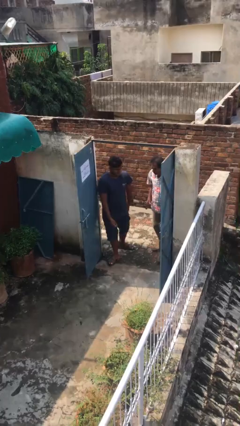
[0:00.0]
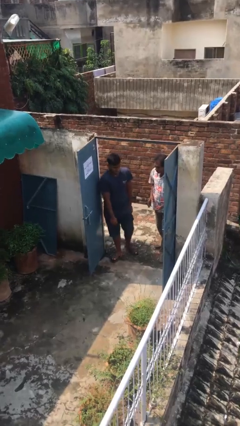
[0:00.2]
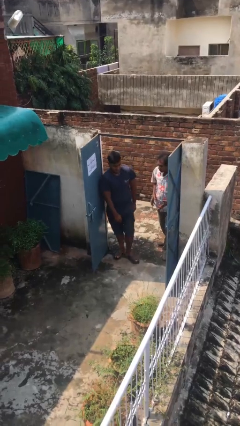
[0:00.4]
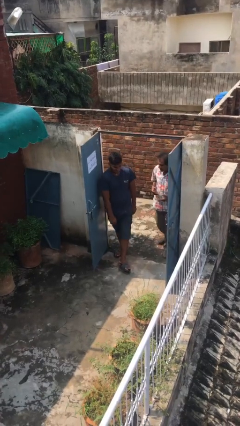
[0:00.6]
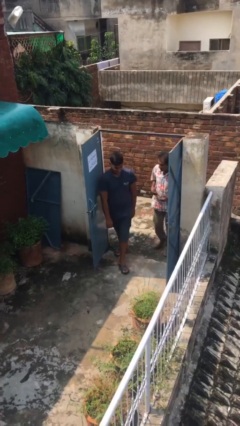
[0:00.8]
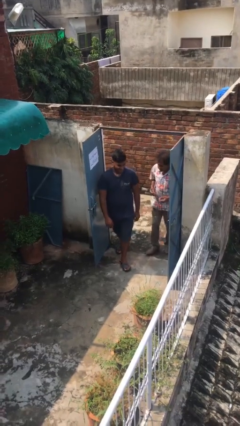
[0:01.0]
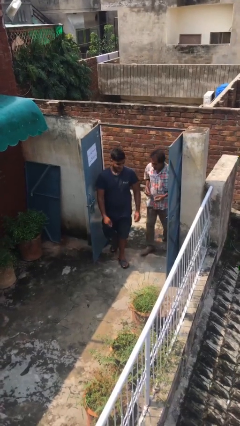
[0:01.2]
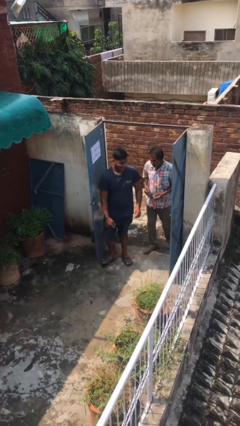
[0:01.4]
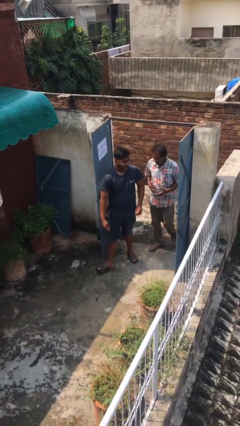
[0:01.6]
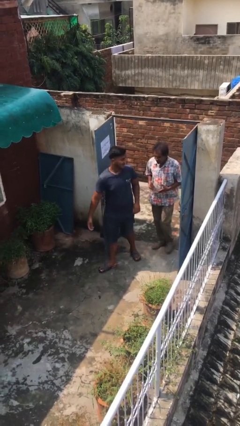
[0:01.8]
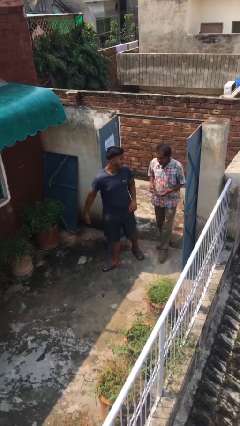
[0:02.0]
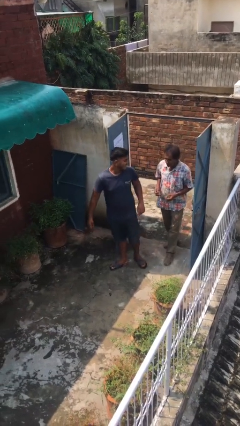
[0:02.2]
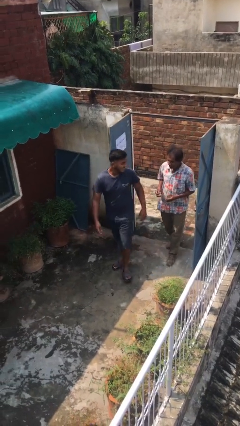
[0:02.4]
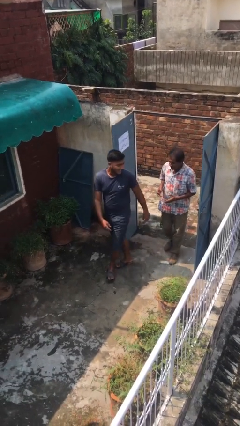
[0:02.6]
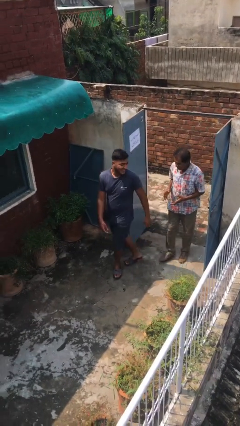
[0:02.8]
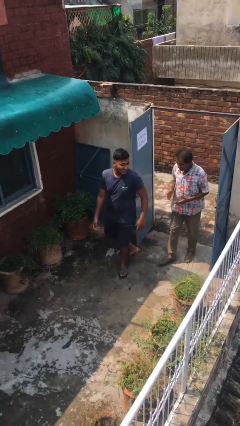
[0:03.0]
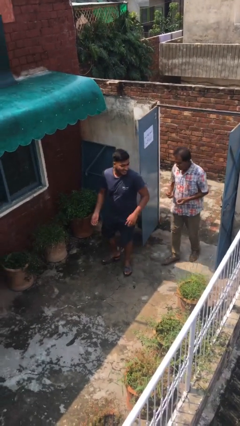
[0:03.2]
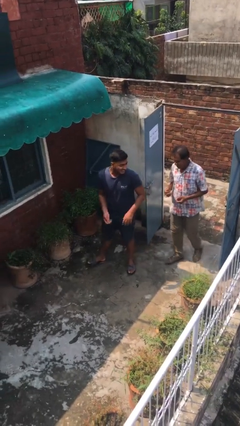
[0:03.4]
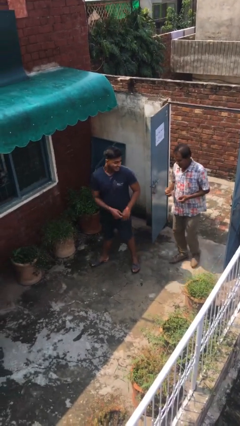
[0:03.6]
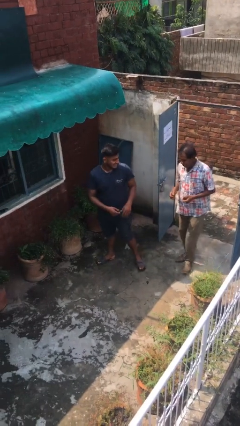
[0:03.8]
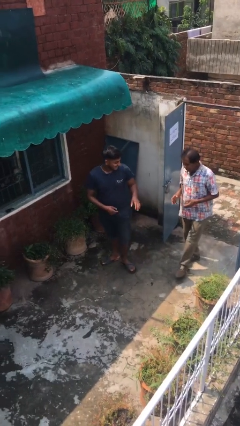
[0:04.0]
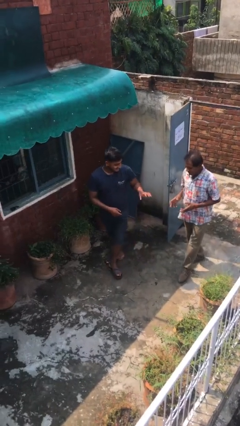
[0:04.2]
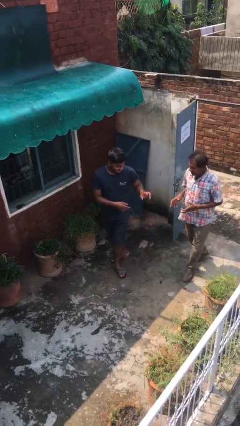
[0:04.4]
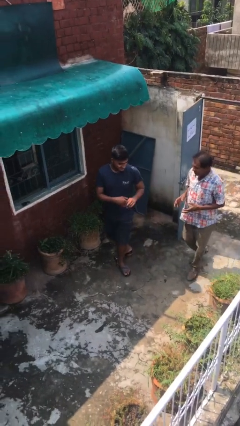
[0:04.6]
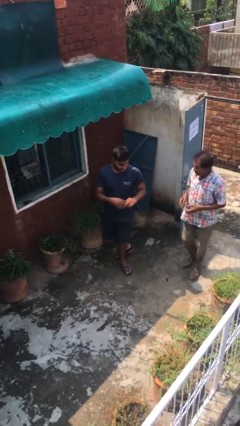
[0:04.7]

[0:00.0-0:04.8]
person talks to person

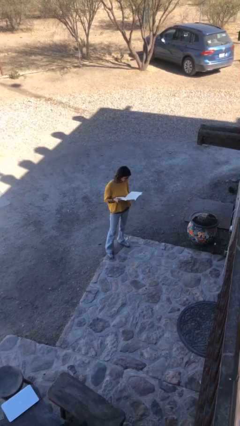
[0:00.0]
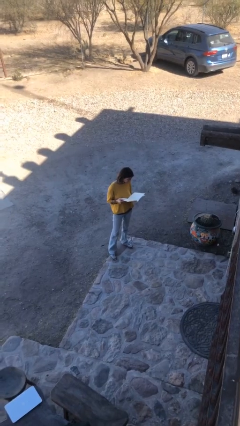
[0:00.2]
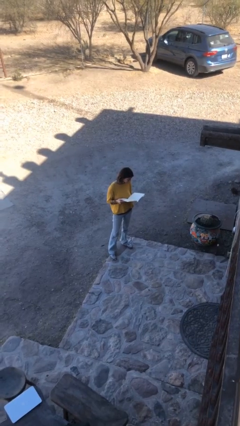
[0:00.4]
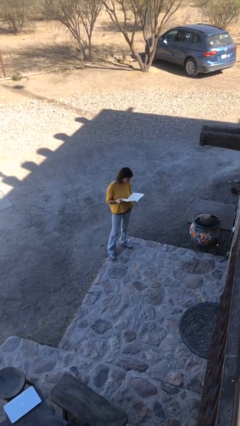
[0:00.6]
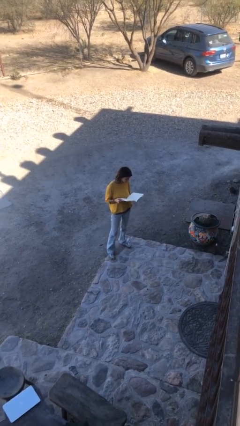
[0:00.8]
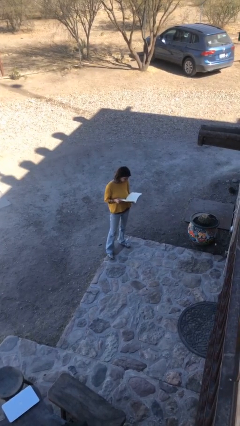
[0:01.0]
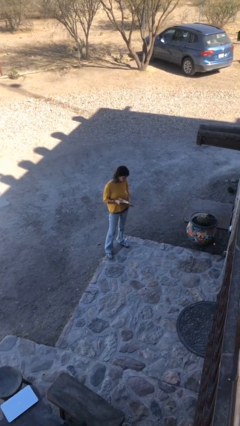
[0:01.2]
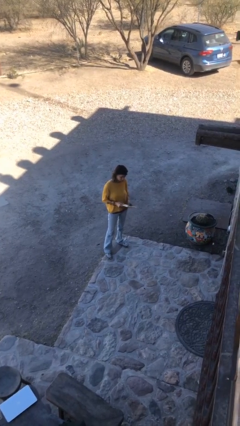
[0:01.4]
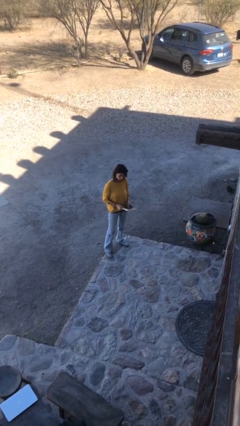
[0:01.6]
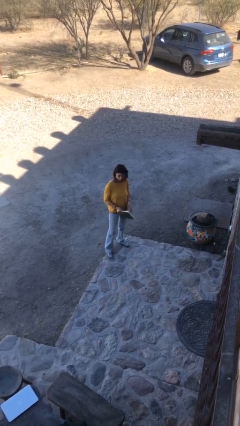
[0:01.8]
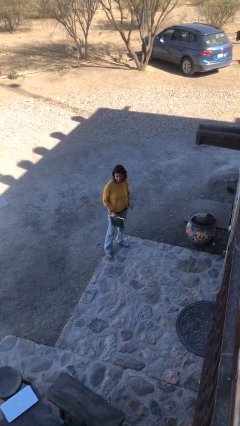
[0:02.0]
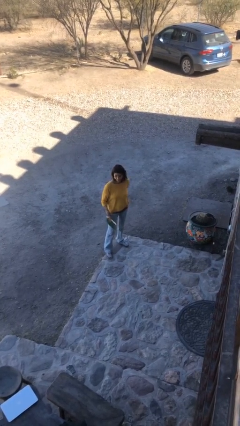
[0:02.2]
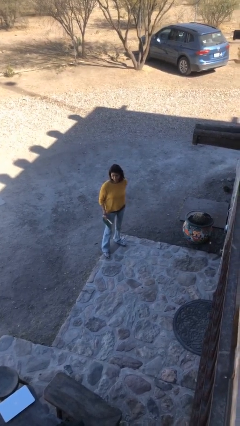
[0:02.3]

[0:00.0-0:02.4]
person reads document

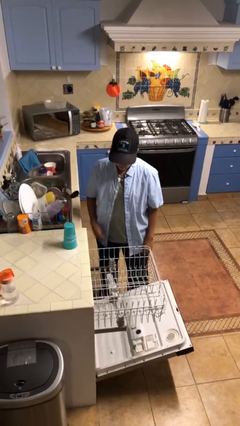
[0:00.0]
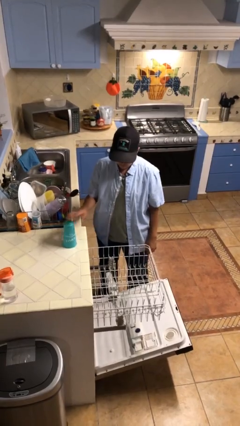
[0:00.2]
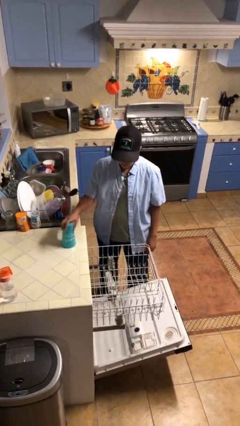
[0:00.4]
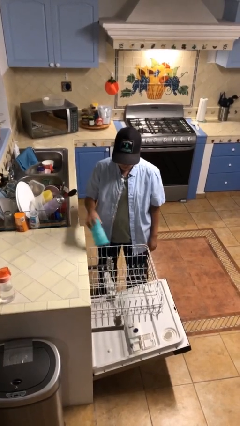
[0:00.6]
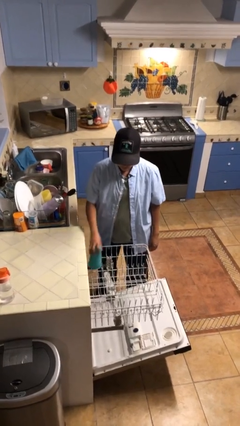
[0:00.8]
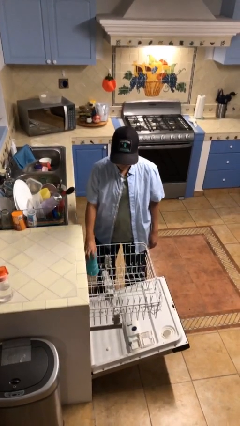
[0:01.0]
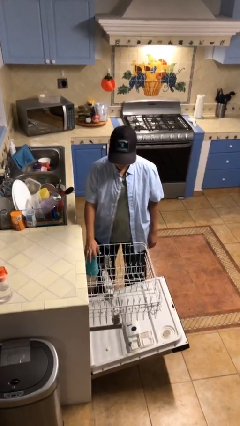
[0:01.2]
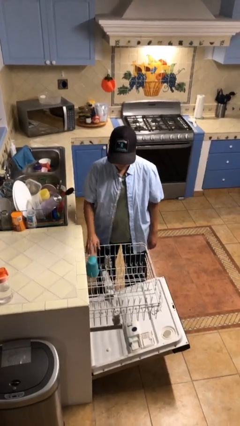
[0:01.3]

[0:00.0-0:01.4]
person loads dishwasher

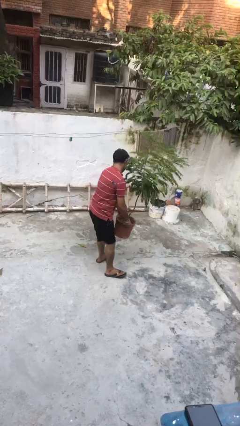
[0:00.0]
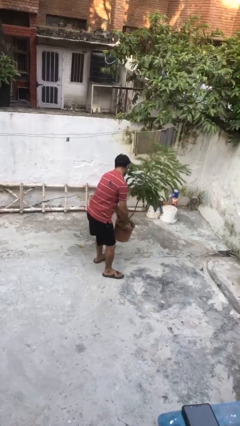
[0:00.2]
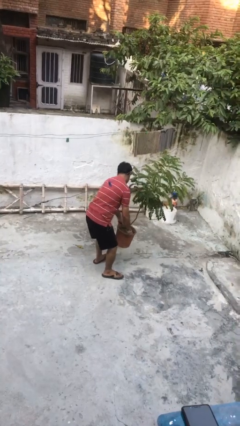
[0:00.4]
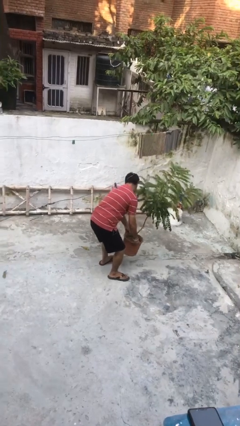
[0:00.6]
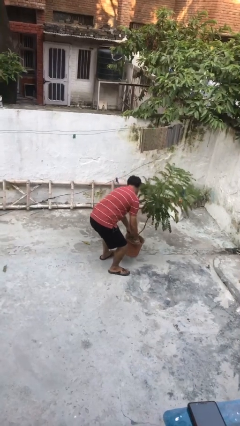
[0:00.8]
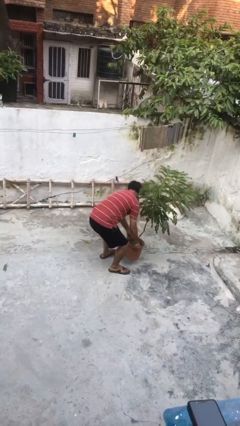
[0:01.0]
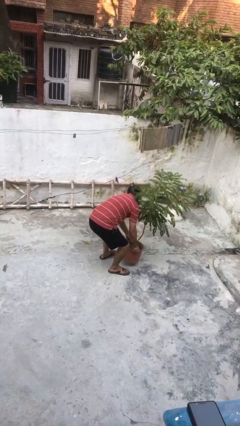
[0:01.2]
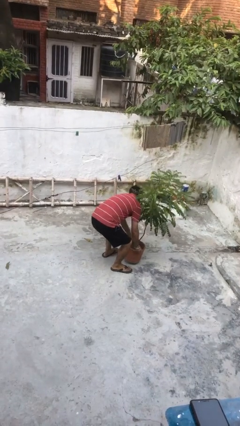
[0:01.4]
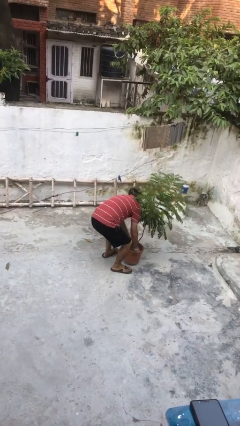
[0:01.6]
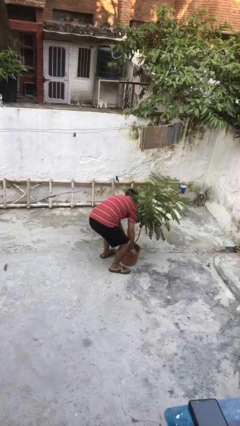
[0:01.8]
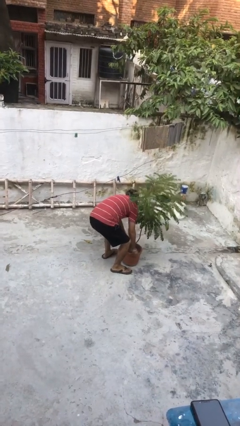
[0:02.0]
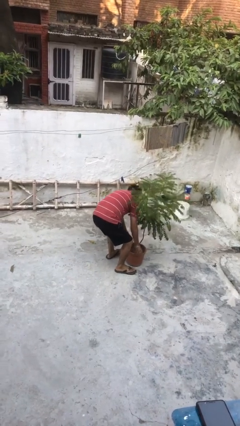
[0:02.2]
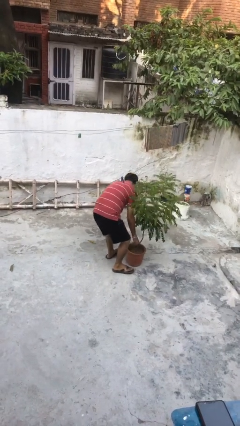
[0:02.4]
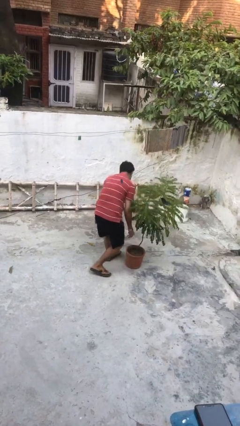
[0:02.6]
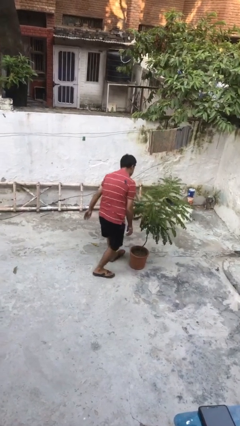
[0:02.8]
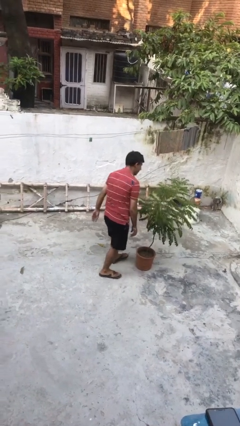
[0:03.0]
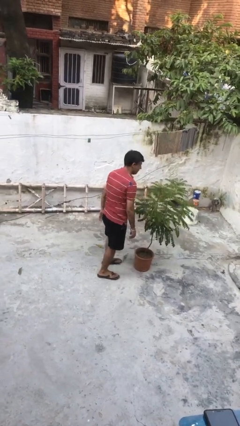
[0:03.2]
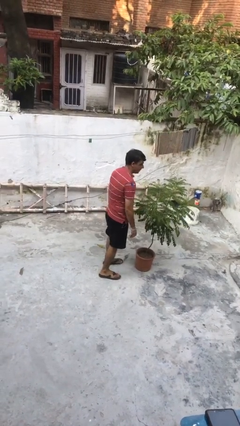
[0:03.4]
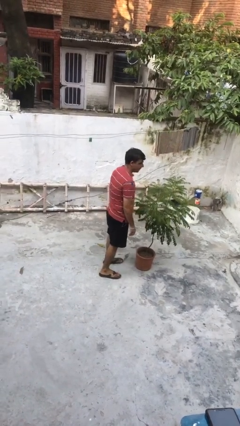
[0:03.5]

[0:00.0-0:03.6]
person puts down object on floor

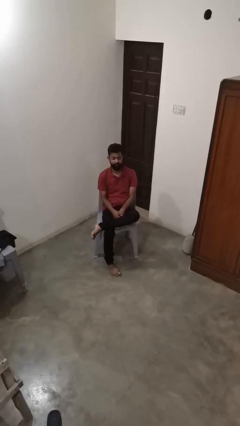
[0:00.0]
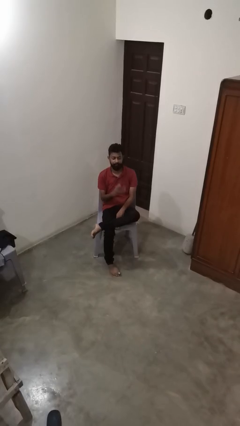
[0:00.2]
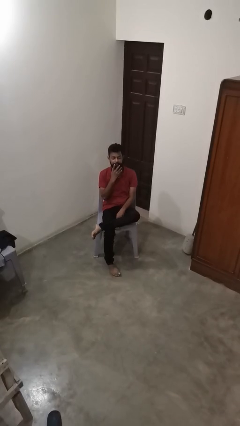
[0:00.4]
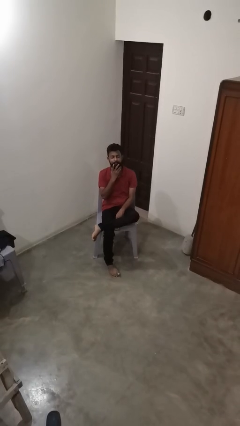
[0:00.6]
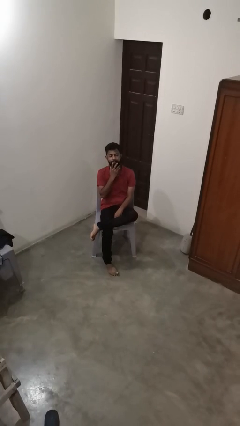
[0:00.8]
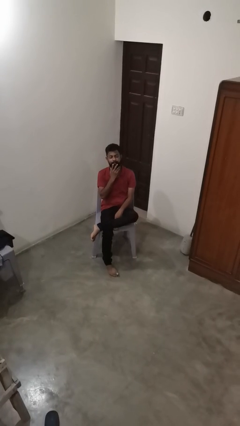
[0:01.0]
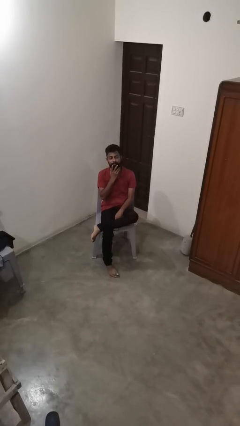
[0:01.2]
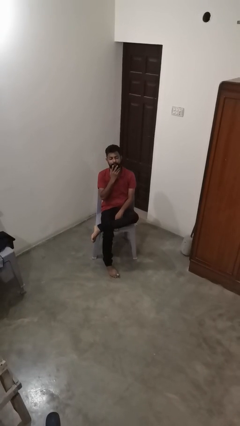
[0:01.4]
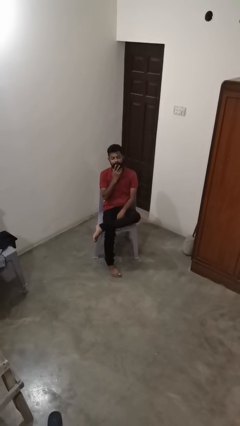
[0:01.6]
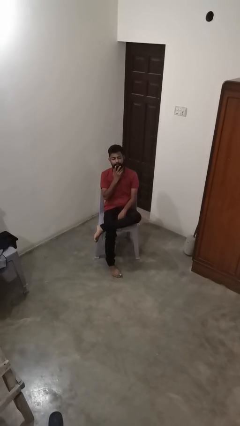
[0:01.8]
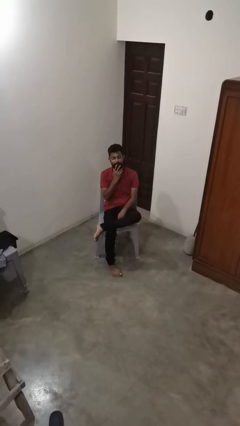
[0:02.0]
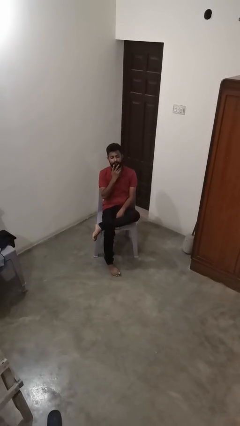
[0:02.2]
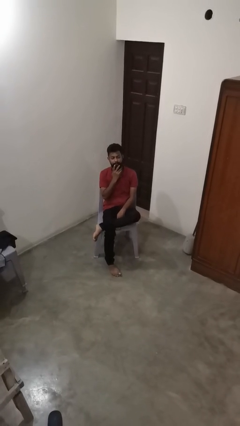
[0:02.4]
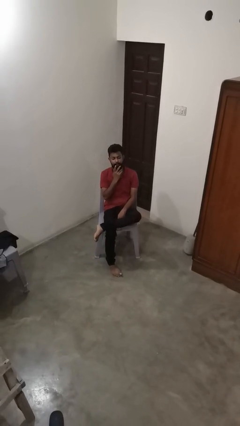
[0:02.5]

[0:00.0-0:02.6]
person strokes chin

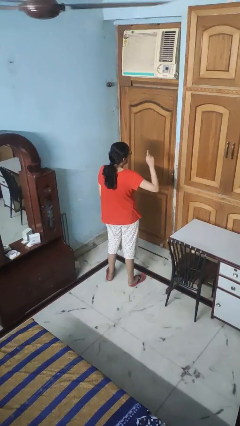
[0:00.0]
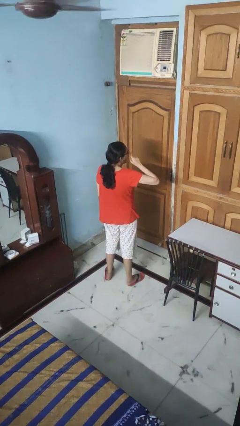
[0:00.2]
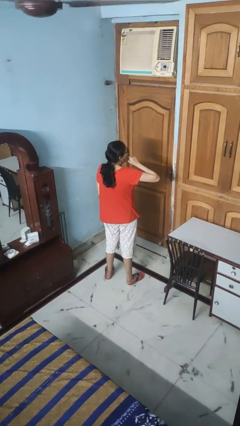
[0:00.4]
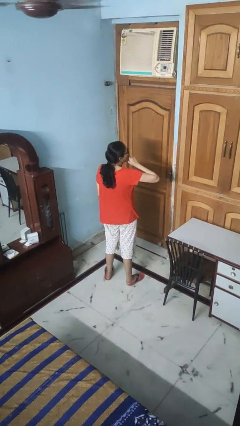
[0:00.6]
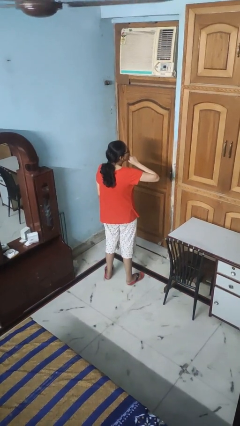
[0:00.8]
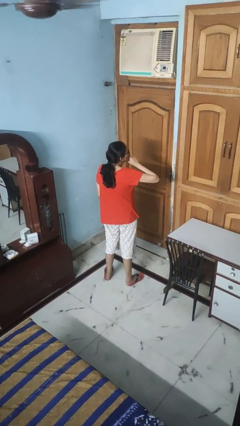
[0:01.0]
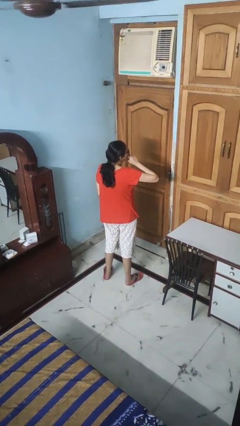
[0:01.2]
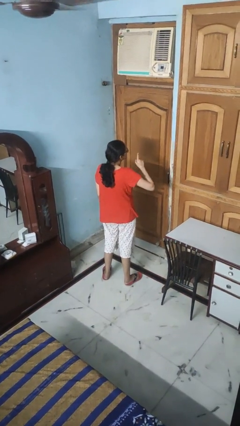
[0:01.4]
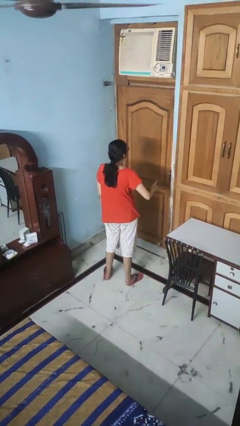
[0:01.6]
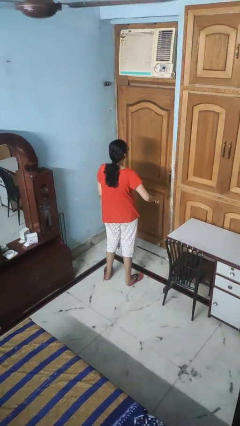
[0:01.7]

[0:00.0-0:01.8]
person gestures be quiet

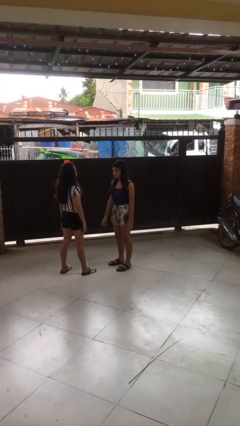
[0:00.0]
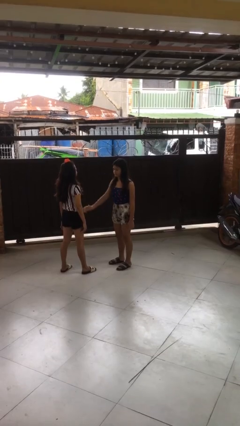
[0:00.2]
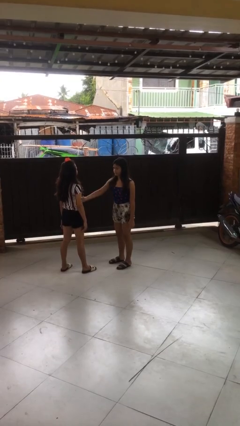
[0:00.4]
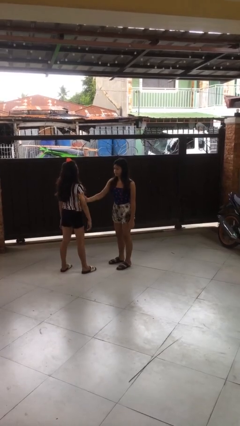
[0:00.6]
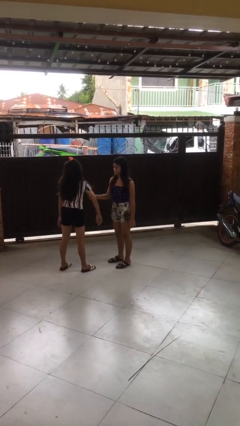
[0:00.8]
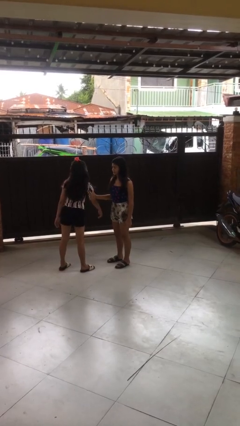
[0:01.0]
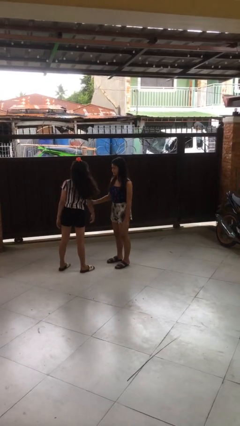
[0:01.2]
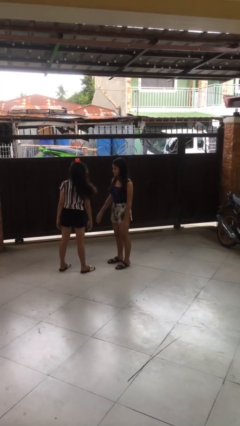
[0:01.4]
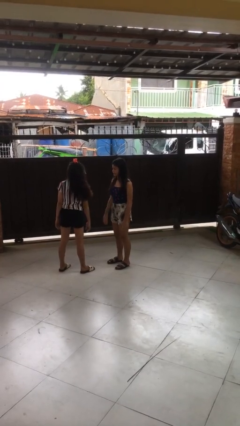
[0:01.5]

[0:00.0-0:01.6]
person grabs person by bicep
